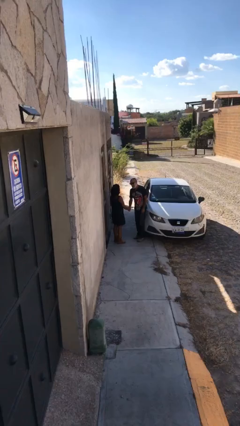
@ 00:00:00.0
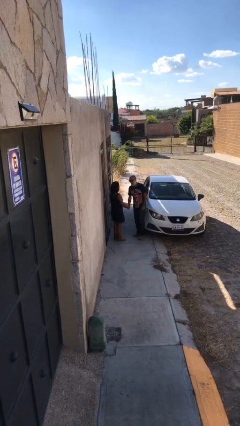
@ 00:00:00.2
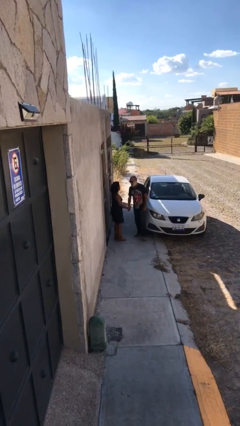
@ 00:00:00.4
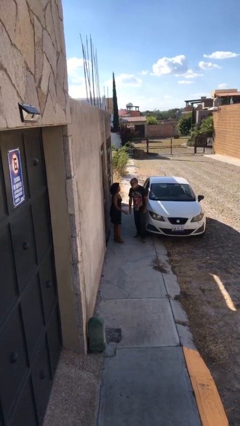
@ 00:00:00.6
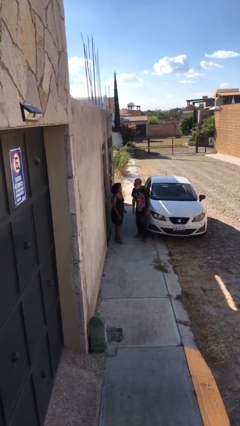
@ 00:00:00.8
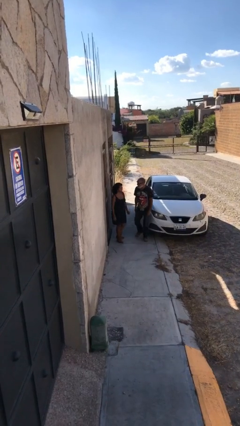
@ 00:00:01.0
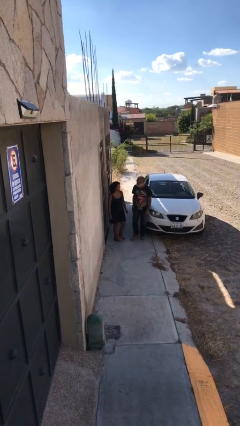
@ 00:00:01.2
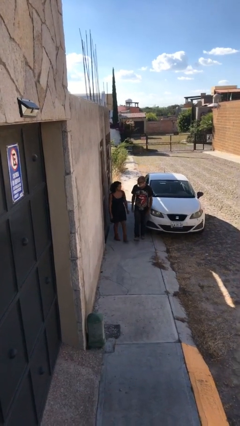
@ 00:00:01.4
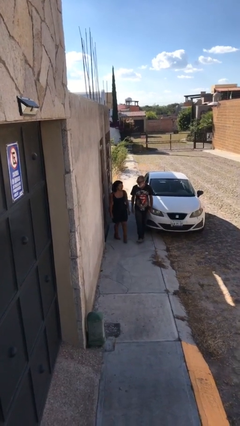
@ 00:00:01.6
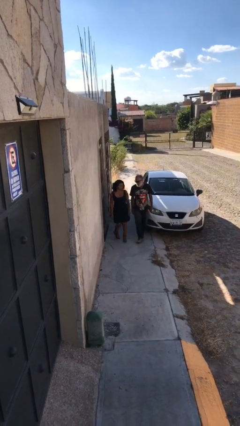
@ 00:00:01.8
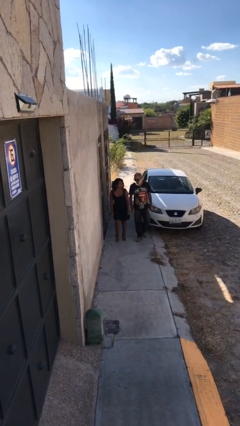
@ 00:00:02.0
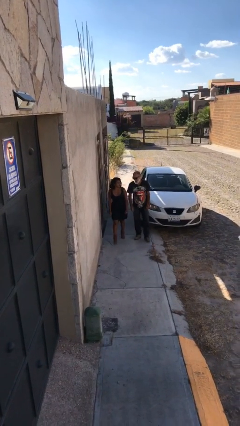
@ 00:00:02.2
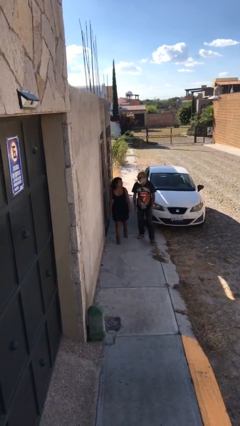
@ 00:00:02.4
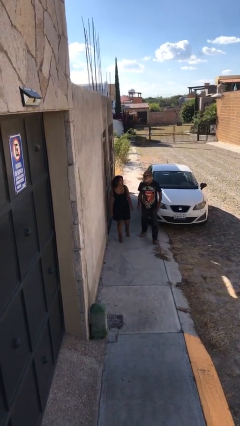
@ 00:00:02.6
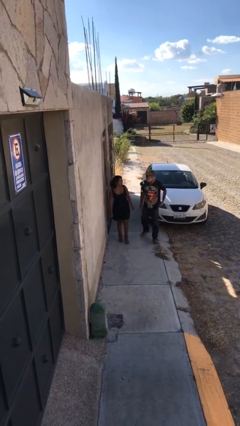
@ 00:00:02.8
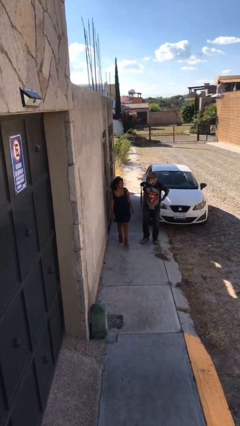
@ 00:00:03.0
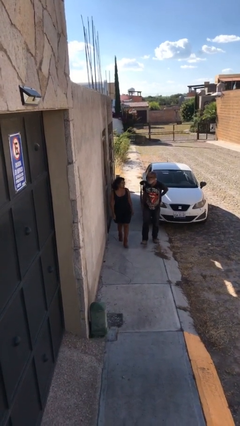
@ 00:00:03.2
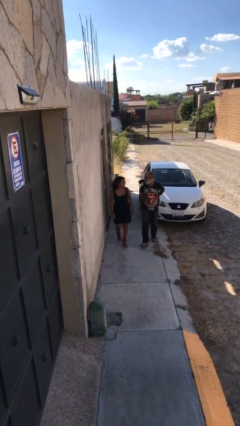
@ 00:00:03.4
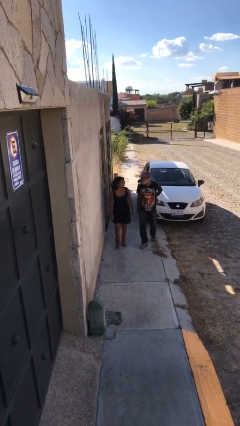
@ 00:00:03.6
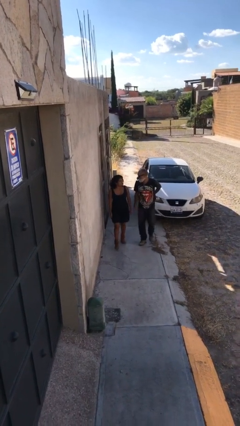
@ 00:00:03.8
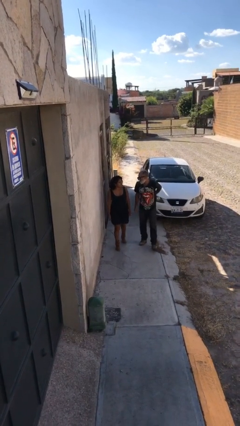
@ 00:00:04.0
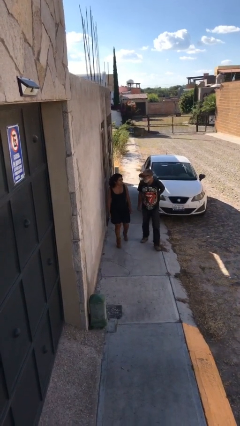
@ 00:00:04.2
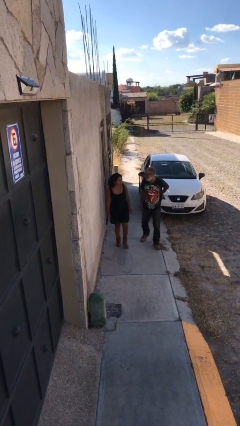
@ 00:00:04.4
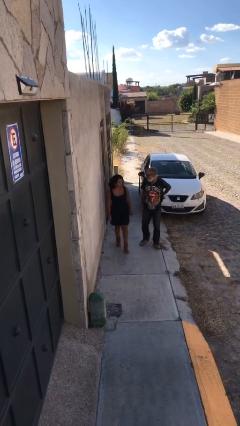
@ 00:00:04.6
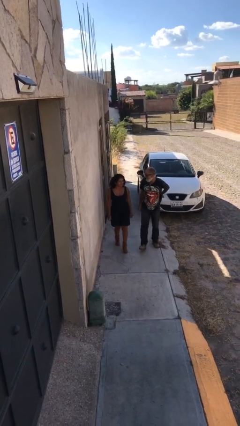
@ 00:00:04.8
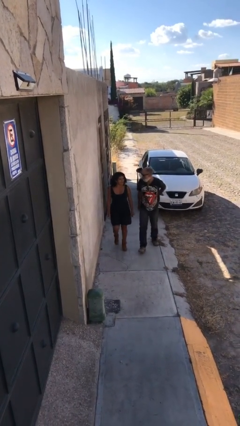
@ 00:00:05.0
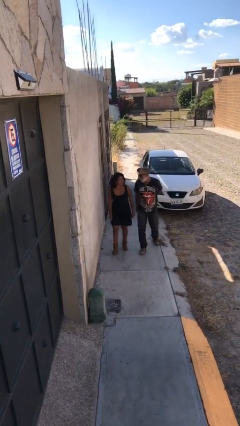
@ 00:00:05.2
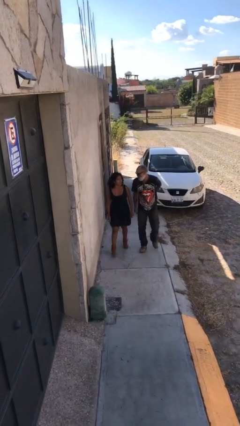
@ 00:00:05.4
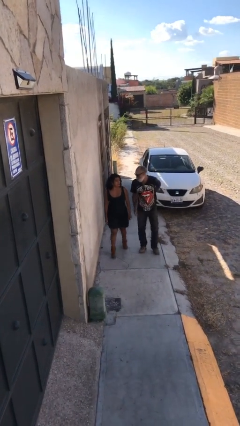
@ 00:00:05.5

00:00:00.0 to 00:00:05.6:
person talks to person

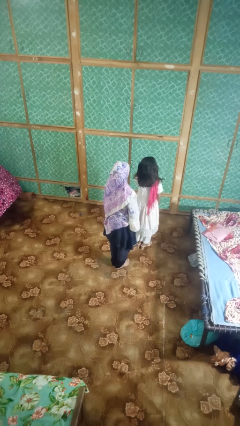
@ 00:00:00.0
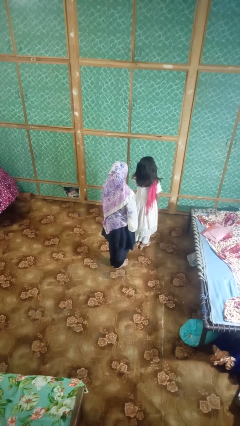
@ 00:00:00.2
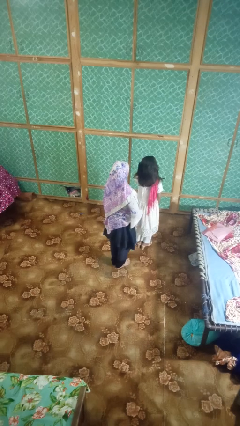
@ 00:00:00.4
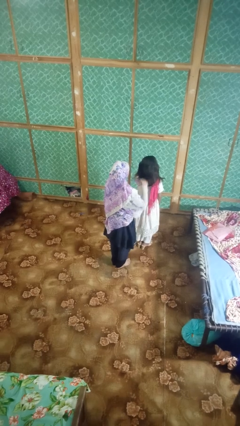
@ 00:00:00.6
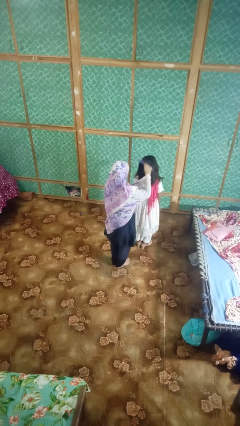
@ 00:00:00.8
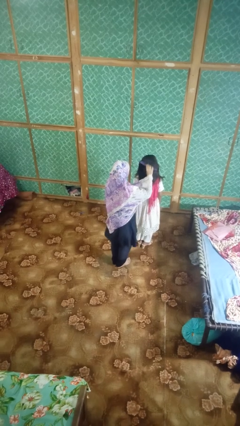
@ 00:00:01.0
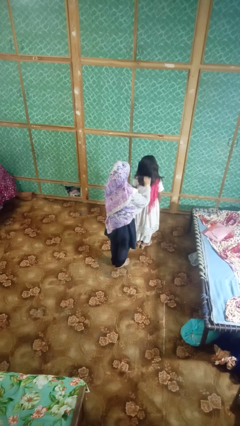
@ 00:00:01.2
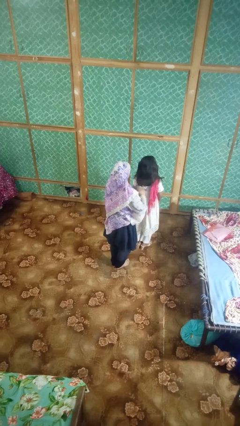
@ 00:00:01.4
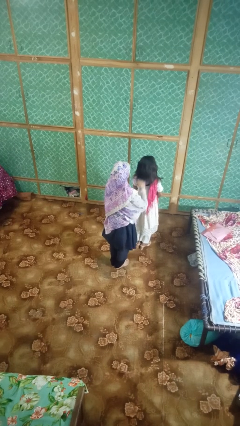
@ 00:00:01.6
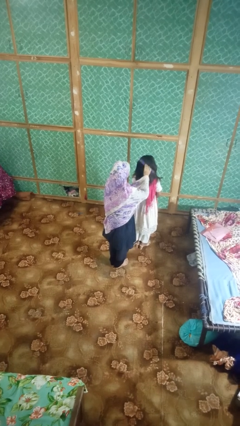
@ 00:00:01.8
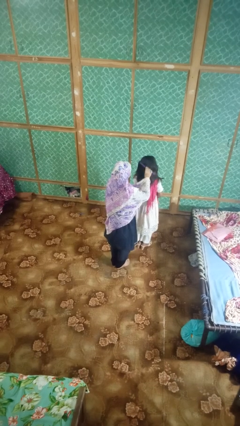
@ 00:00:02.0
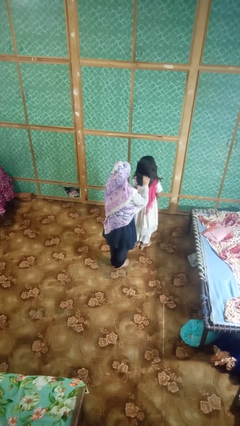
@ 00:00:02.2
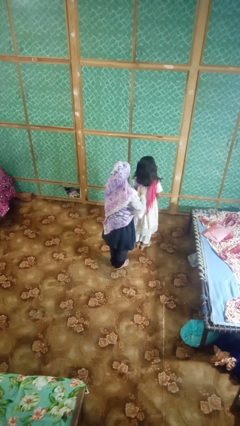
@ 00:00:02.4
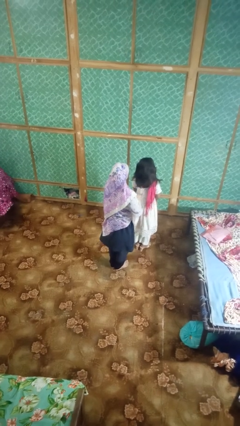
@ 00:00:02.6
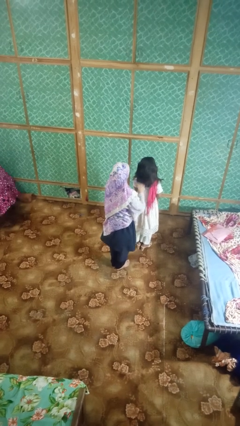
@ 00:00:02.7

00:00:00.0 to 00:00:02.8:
person brushes hair of person

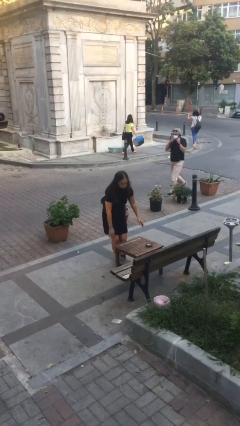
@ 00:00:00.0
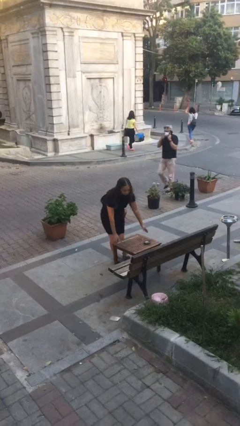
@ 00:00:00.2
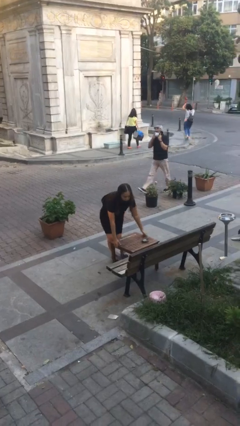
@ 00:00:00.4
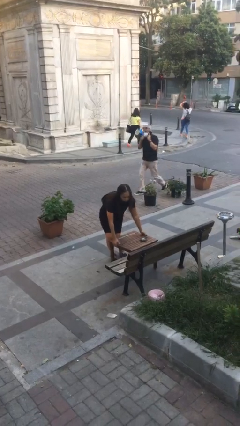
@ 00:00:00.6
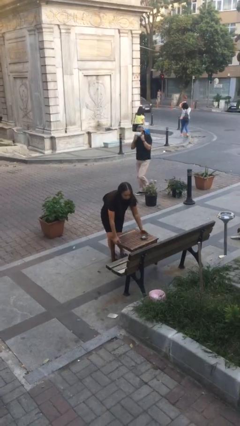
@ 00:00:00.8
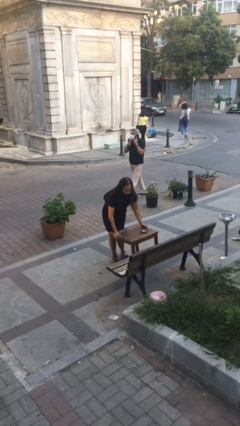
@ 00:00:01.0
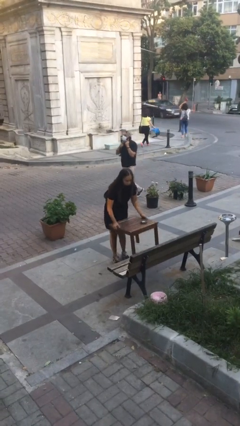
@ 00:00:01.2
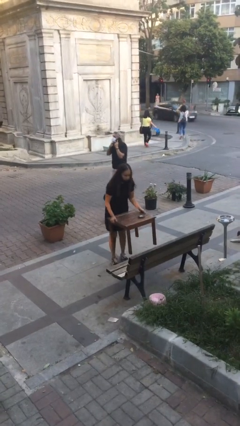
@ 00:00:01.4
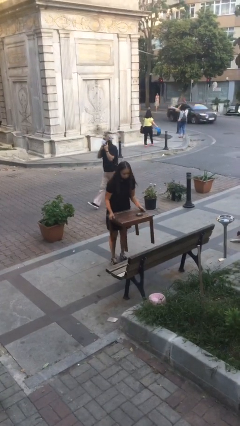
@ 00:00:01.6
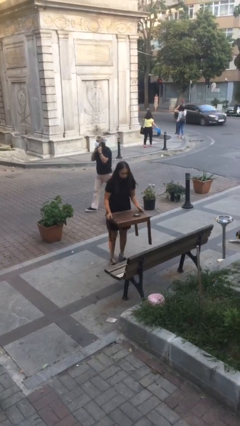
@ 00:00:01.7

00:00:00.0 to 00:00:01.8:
person picks up object from floor

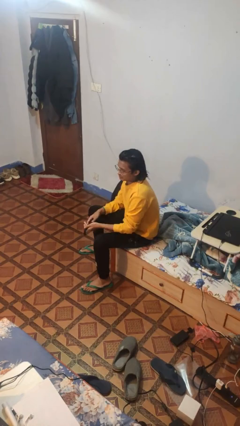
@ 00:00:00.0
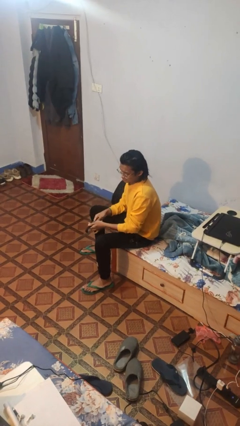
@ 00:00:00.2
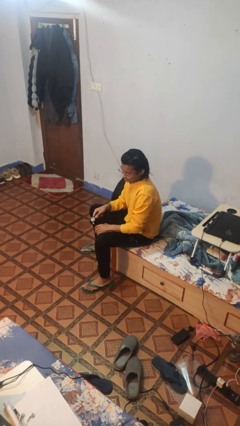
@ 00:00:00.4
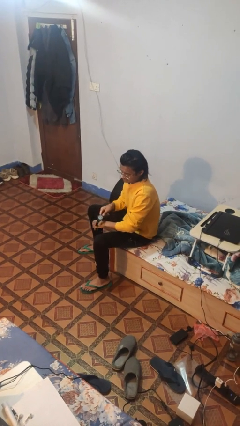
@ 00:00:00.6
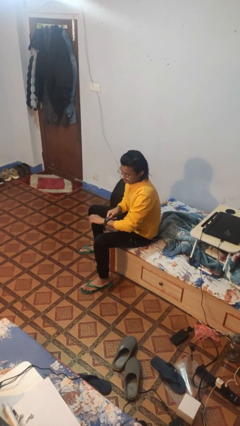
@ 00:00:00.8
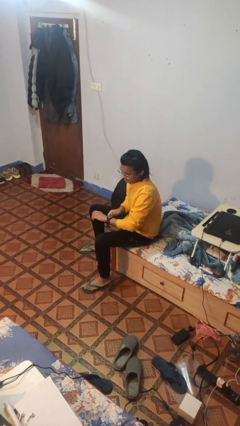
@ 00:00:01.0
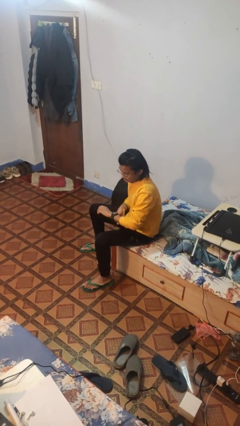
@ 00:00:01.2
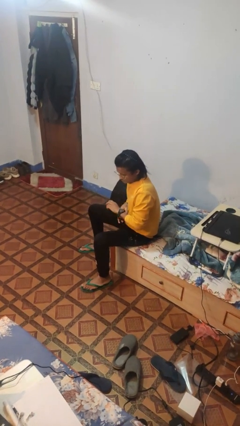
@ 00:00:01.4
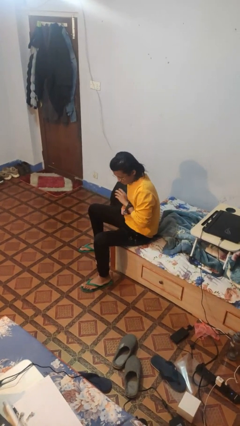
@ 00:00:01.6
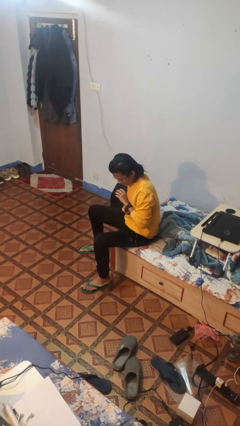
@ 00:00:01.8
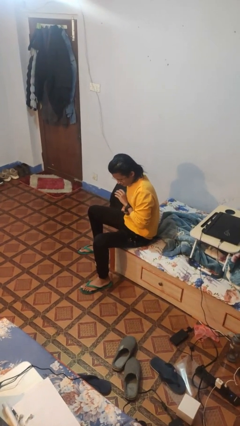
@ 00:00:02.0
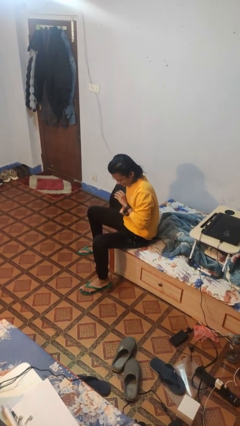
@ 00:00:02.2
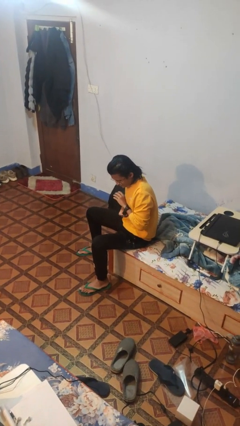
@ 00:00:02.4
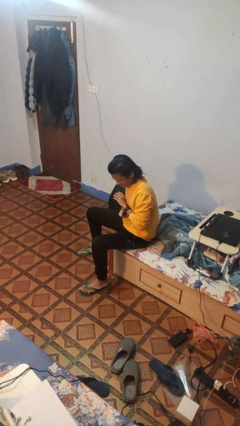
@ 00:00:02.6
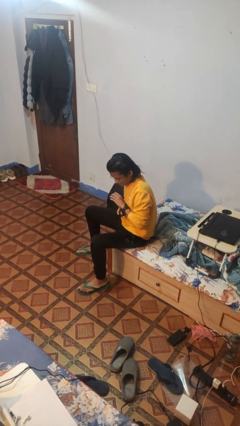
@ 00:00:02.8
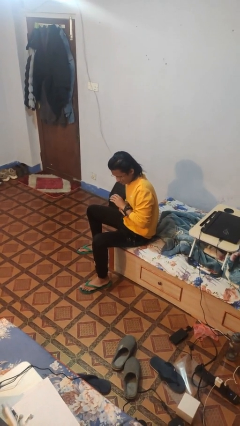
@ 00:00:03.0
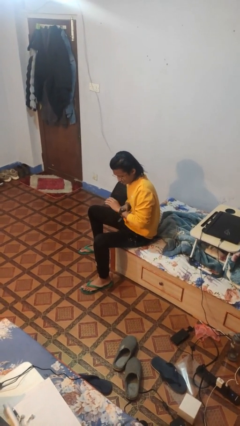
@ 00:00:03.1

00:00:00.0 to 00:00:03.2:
person puts on wristwatch

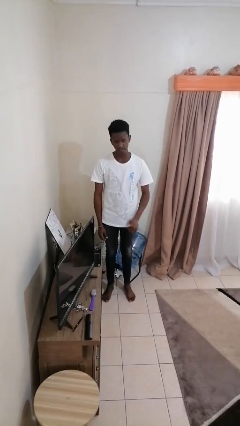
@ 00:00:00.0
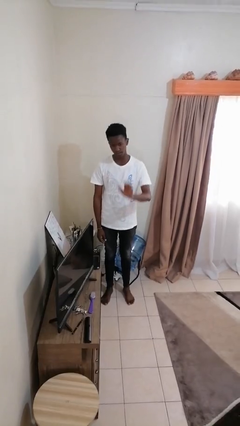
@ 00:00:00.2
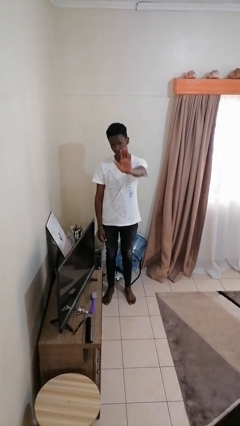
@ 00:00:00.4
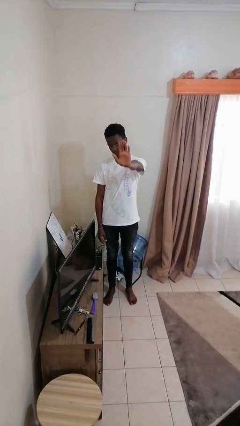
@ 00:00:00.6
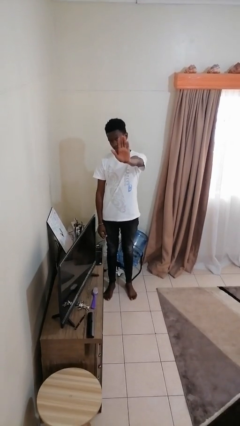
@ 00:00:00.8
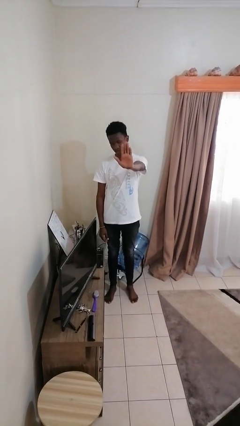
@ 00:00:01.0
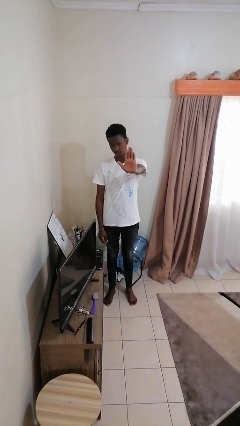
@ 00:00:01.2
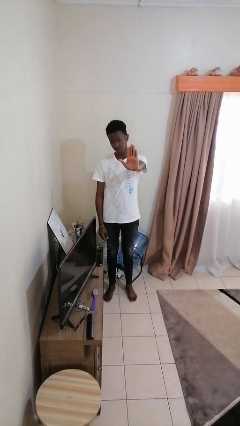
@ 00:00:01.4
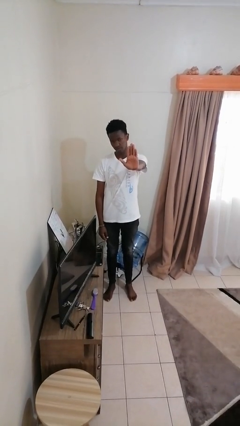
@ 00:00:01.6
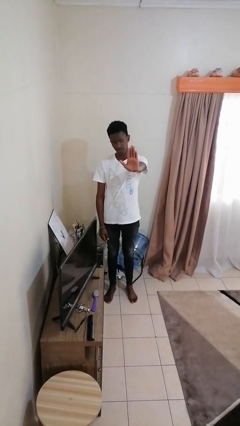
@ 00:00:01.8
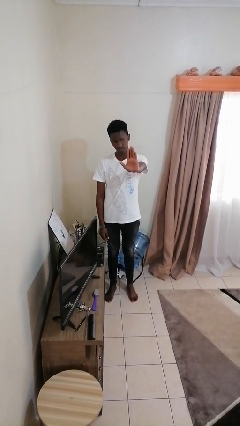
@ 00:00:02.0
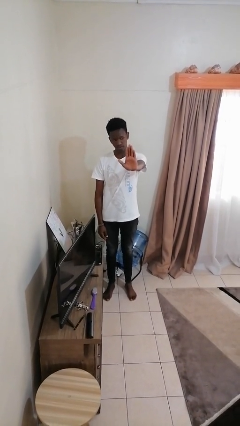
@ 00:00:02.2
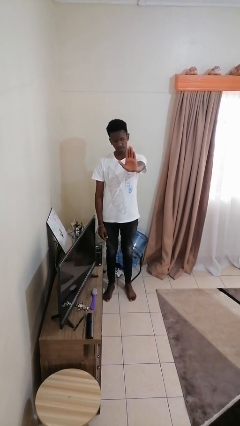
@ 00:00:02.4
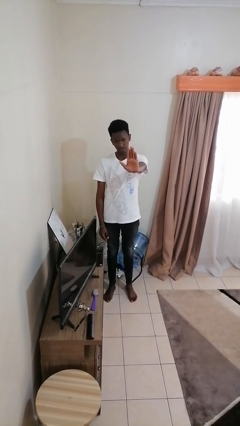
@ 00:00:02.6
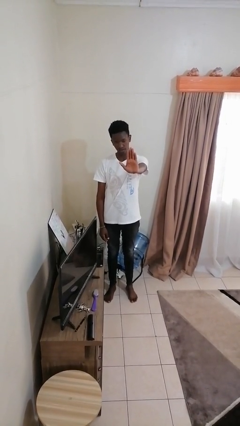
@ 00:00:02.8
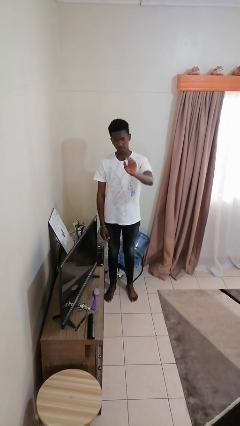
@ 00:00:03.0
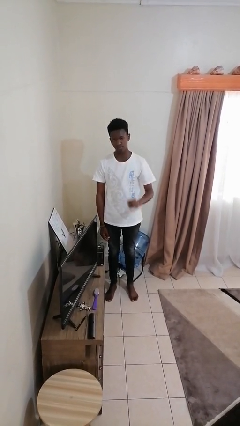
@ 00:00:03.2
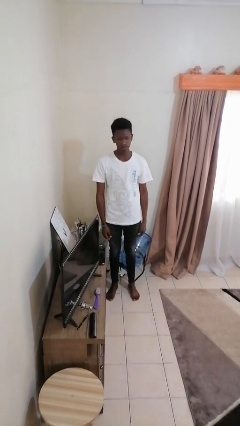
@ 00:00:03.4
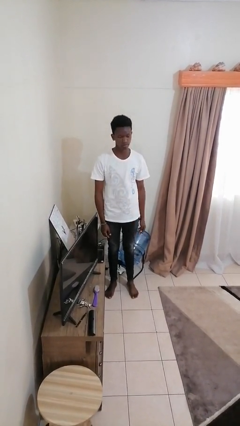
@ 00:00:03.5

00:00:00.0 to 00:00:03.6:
person gestures stop

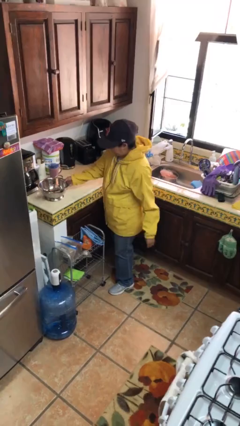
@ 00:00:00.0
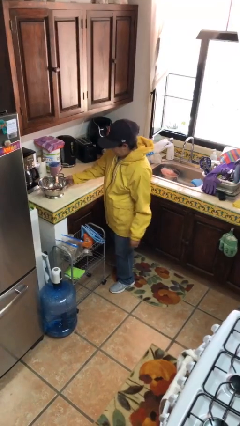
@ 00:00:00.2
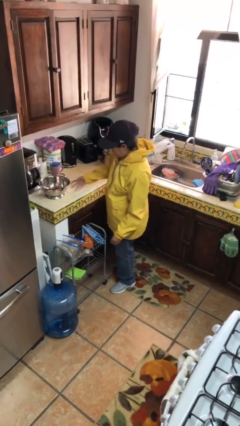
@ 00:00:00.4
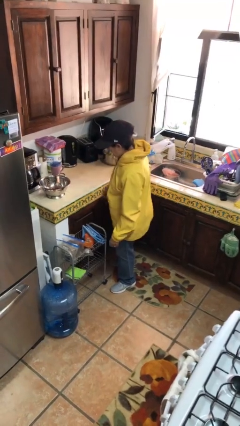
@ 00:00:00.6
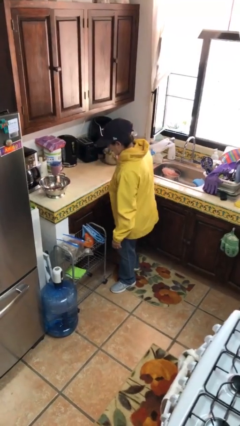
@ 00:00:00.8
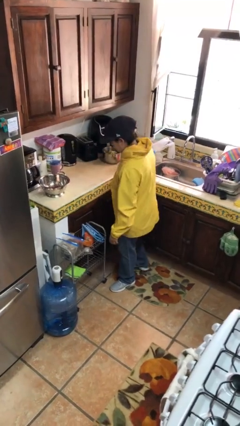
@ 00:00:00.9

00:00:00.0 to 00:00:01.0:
person puts down object on countertop
